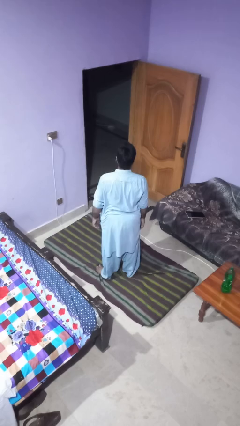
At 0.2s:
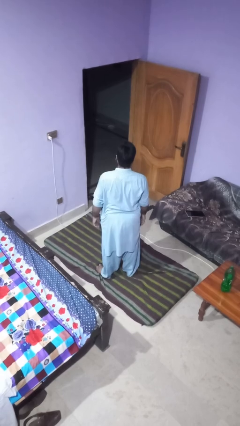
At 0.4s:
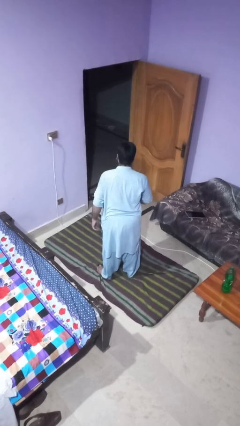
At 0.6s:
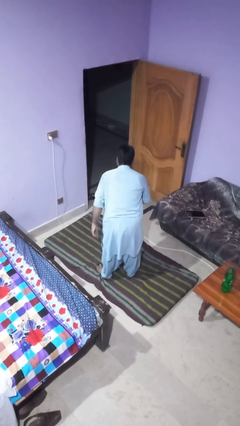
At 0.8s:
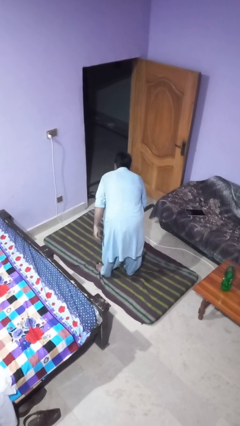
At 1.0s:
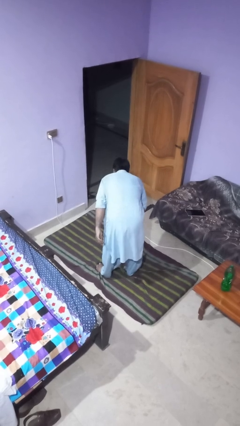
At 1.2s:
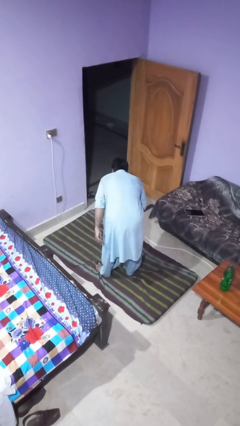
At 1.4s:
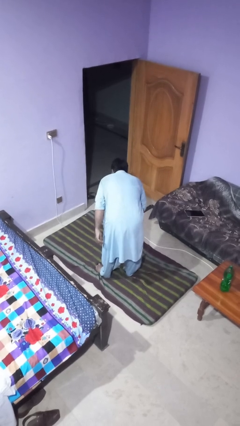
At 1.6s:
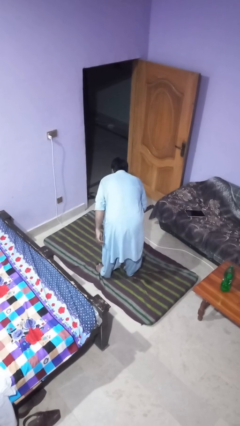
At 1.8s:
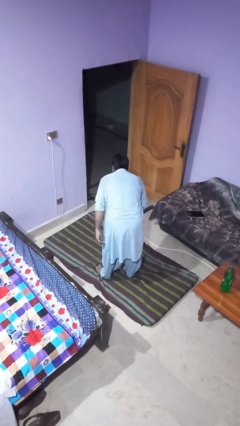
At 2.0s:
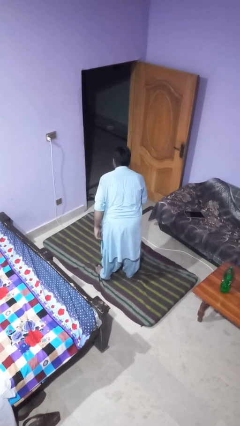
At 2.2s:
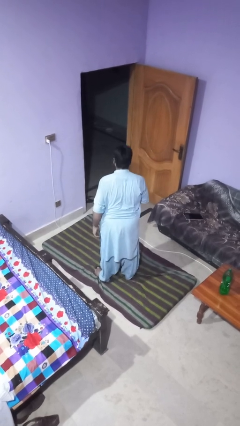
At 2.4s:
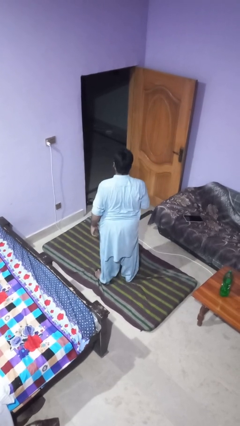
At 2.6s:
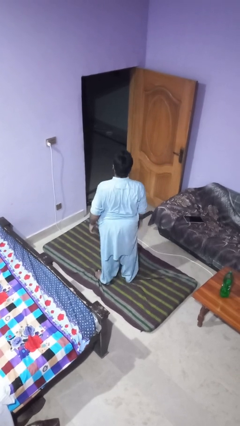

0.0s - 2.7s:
person bows

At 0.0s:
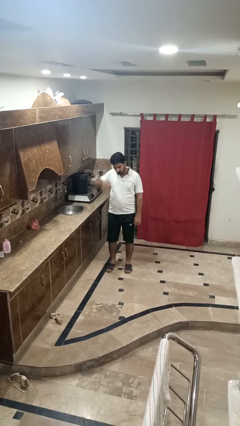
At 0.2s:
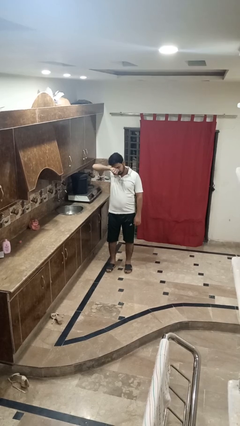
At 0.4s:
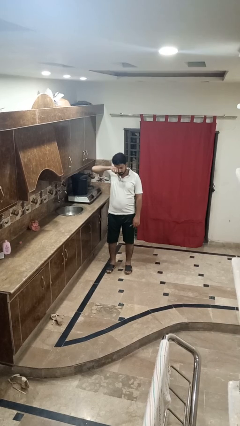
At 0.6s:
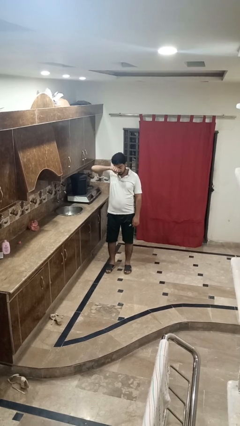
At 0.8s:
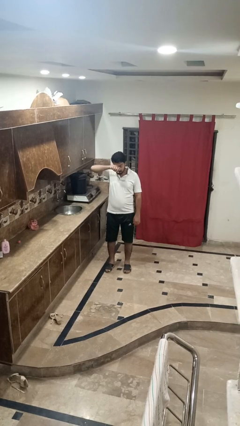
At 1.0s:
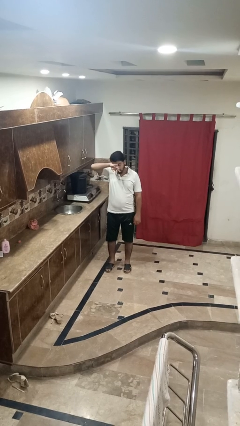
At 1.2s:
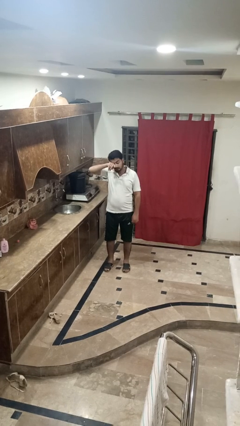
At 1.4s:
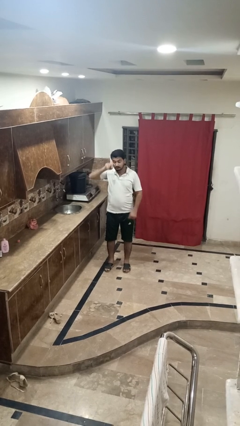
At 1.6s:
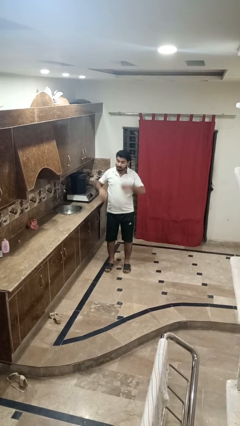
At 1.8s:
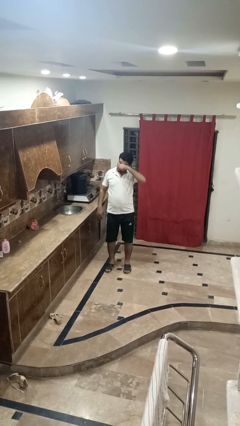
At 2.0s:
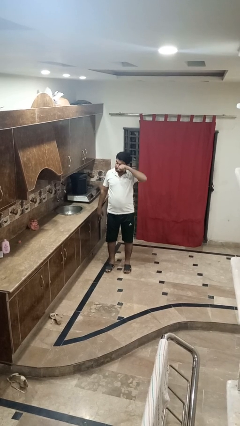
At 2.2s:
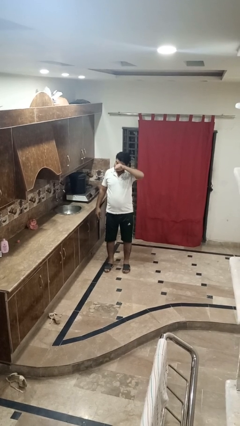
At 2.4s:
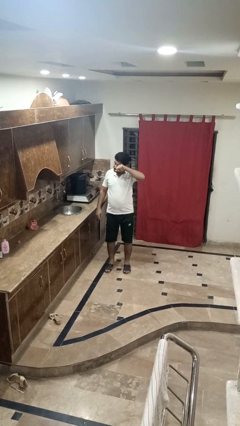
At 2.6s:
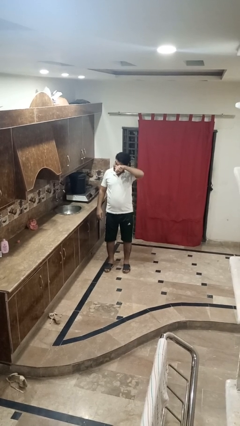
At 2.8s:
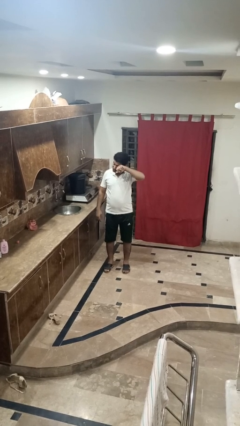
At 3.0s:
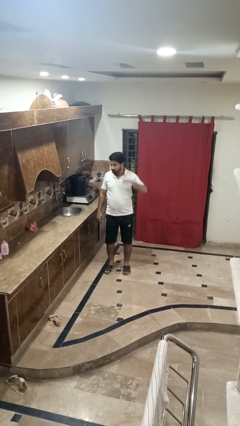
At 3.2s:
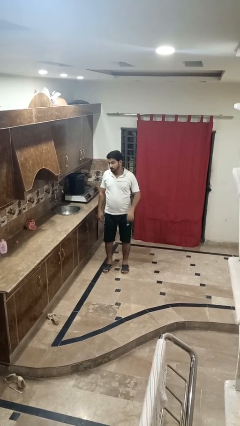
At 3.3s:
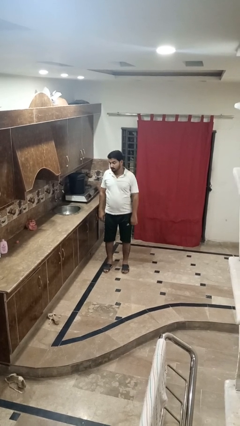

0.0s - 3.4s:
person rubs eyes

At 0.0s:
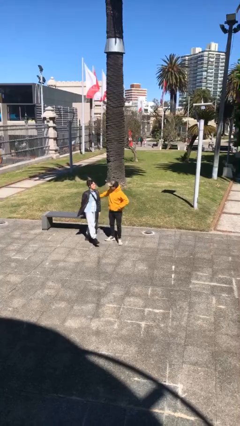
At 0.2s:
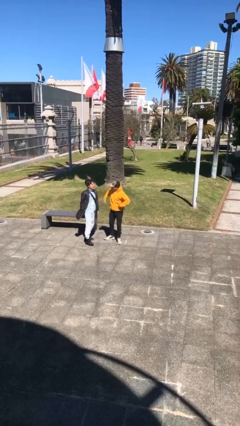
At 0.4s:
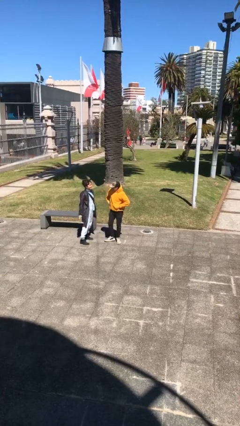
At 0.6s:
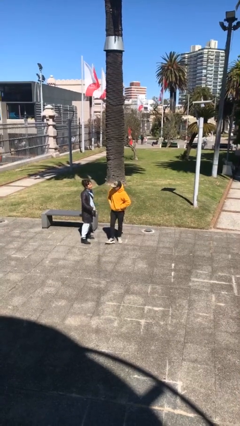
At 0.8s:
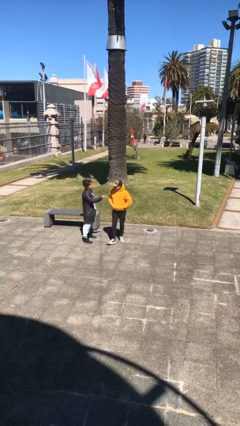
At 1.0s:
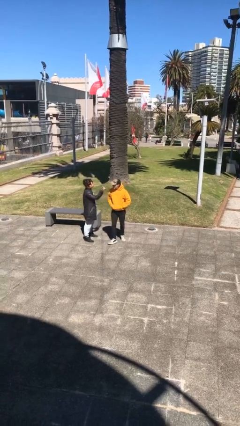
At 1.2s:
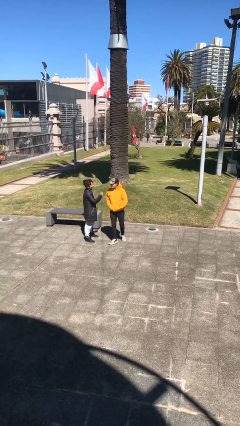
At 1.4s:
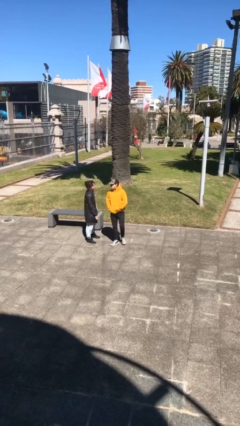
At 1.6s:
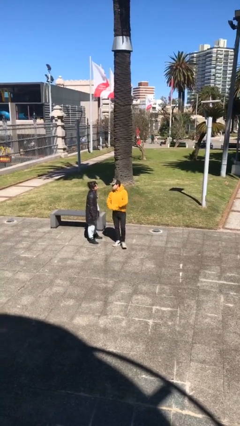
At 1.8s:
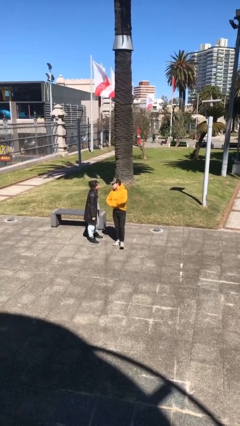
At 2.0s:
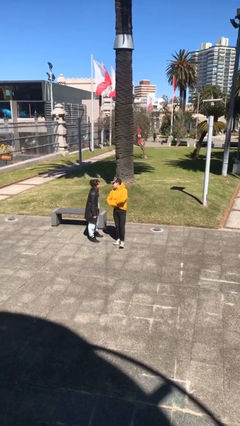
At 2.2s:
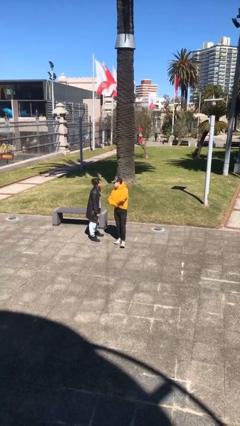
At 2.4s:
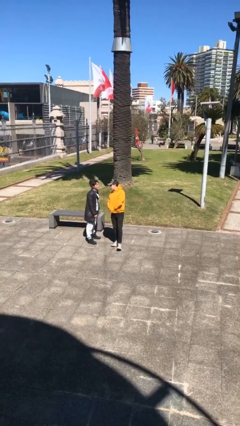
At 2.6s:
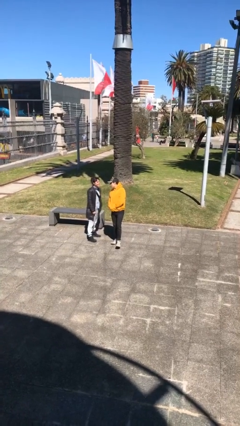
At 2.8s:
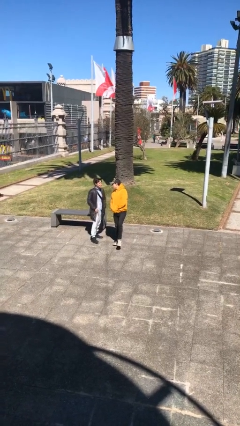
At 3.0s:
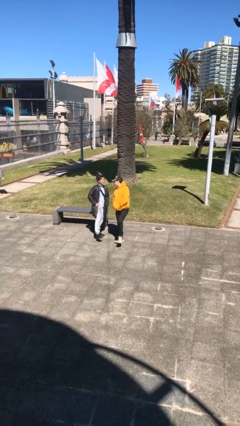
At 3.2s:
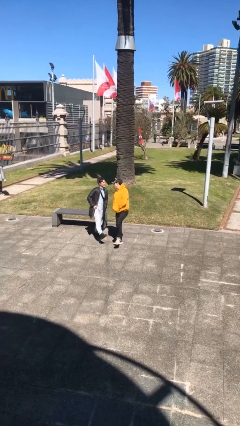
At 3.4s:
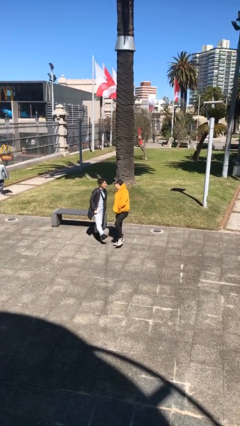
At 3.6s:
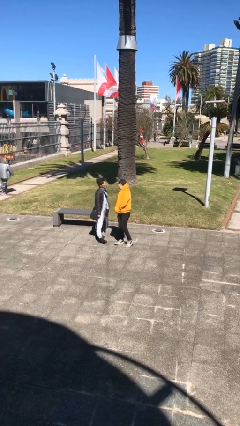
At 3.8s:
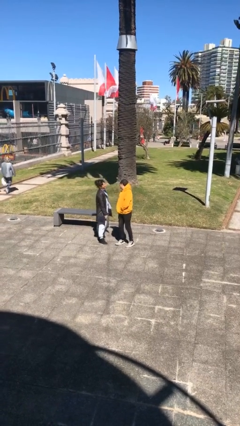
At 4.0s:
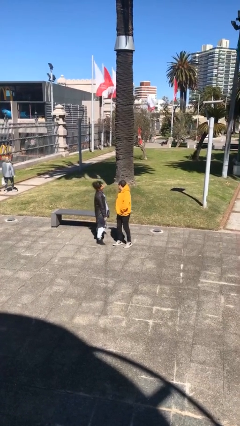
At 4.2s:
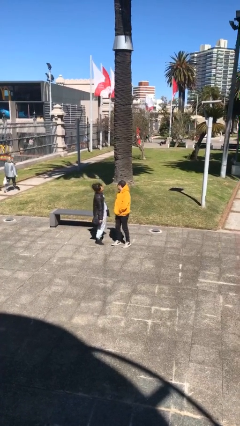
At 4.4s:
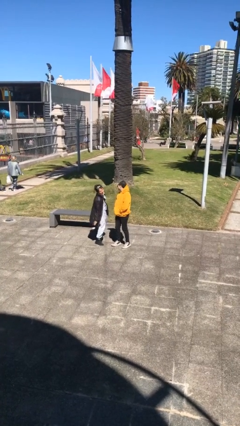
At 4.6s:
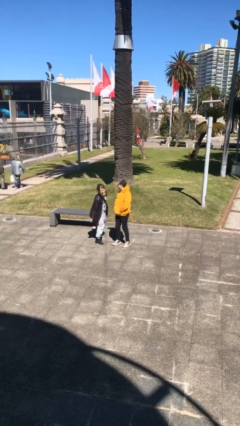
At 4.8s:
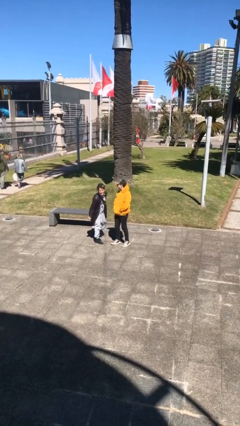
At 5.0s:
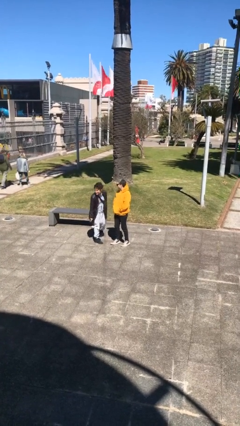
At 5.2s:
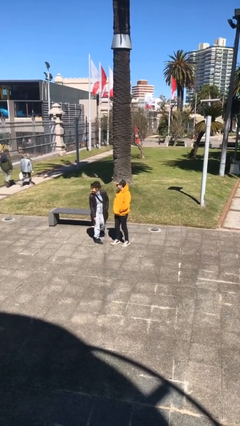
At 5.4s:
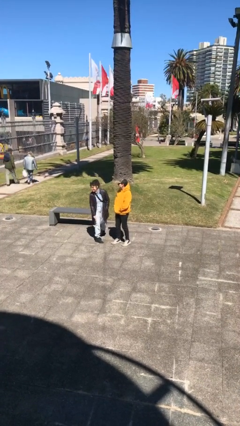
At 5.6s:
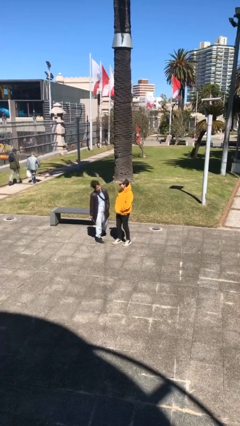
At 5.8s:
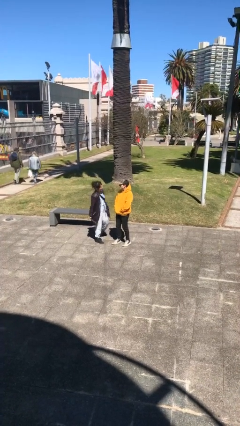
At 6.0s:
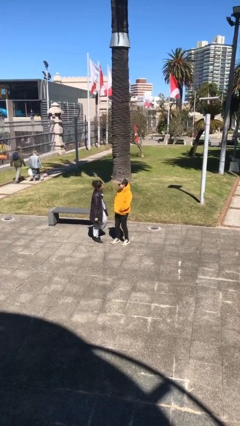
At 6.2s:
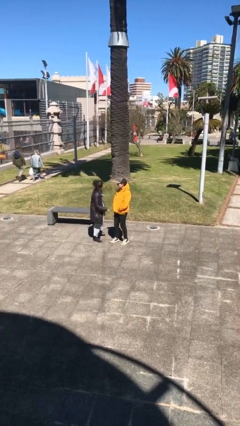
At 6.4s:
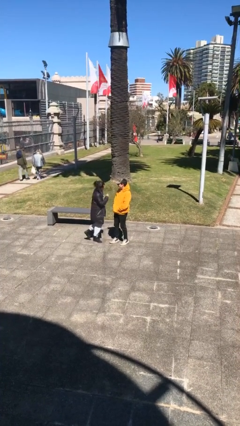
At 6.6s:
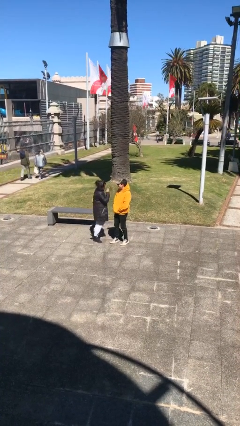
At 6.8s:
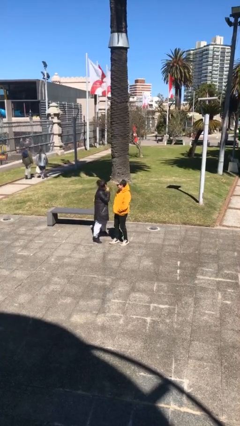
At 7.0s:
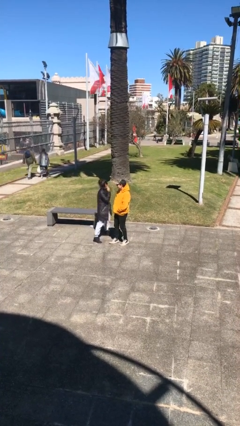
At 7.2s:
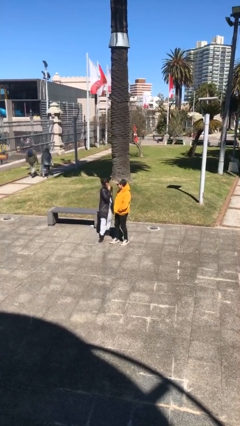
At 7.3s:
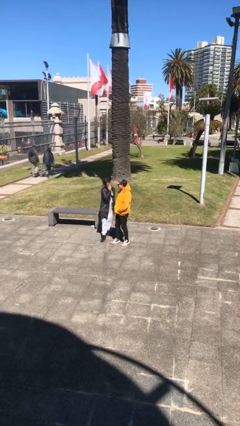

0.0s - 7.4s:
person talks to person

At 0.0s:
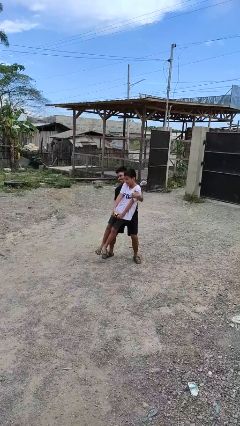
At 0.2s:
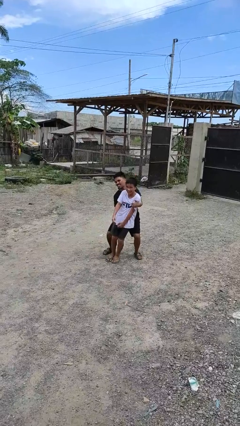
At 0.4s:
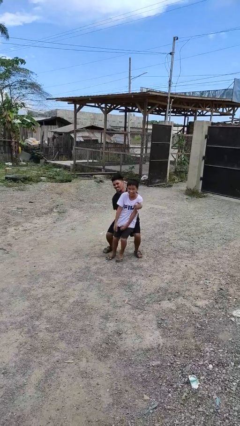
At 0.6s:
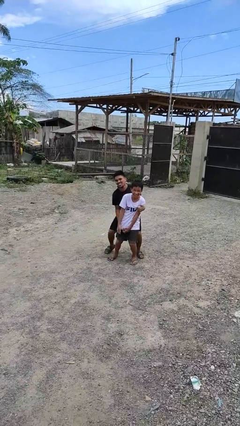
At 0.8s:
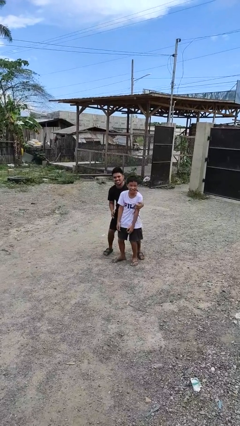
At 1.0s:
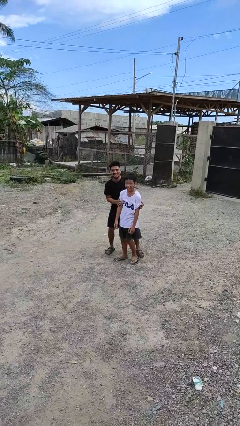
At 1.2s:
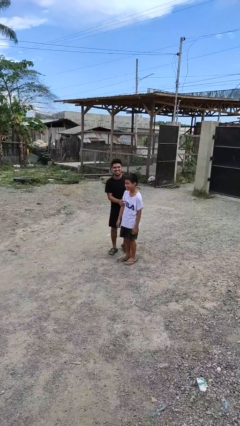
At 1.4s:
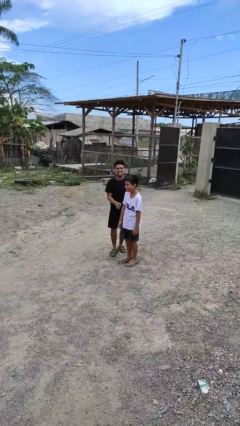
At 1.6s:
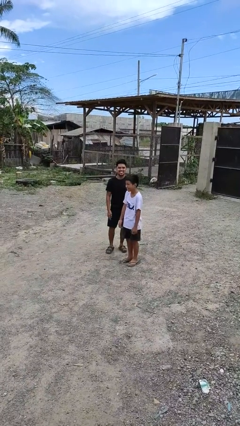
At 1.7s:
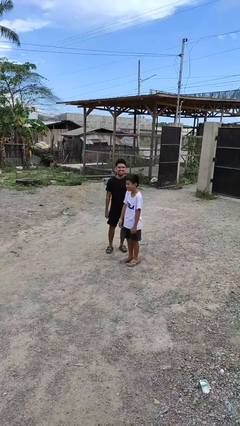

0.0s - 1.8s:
person puts down person

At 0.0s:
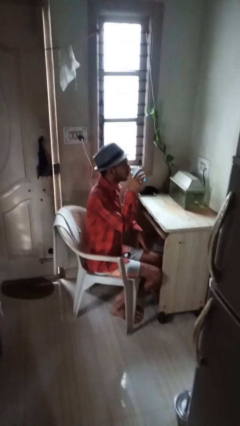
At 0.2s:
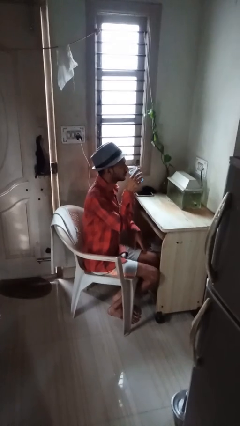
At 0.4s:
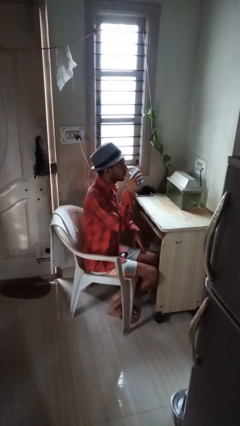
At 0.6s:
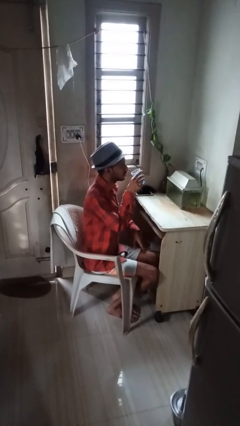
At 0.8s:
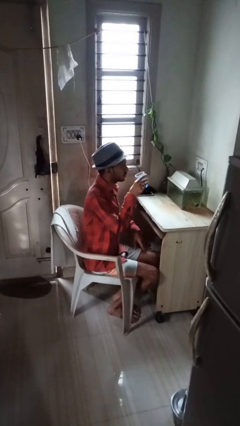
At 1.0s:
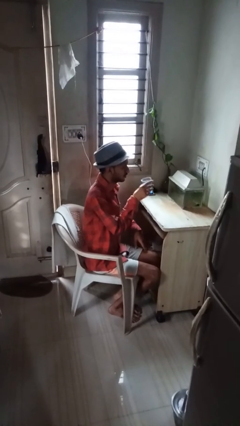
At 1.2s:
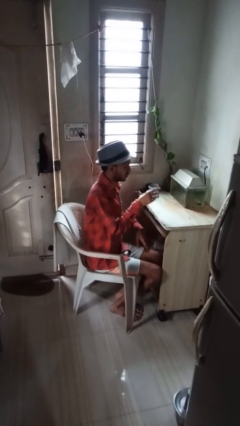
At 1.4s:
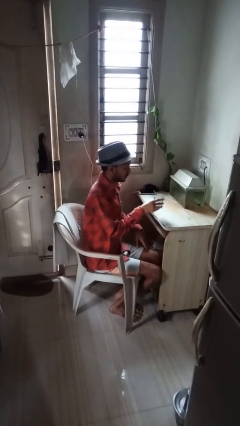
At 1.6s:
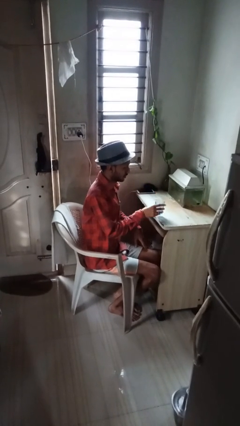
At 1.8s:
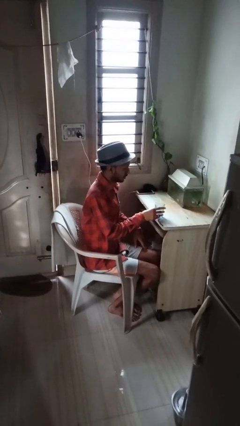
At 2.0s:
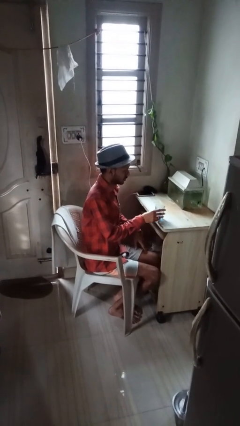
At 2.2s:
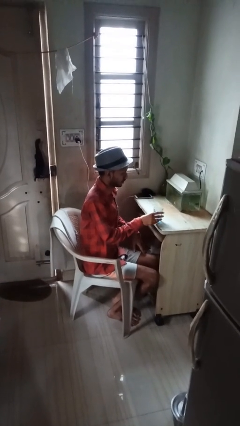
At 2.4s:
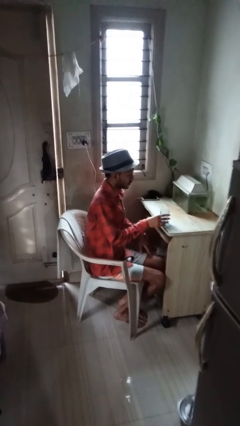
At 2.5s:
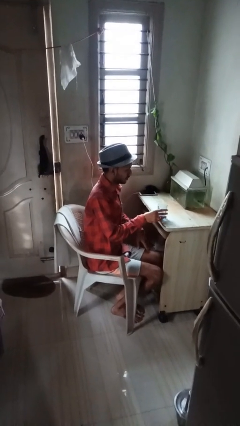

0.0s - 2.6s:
person puts down object on table
